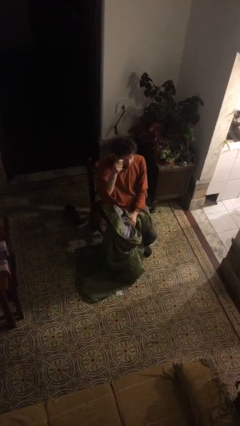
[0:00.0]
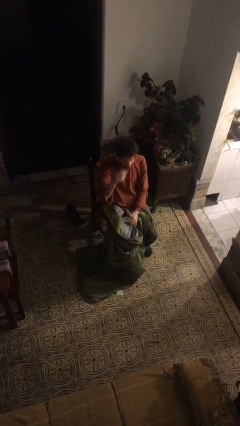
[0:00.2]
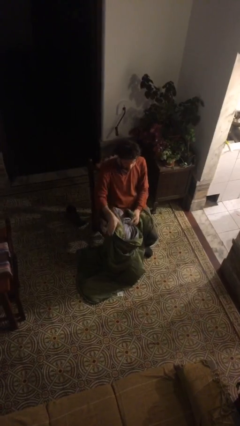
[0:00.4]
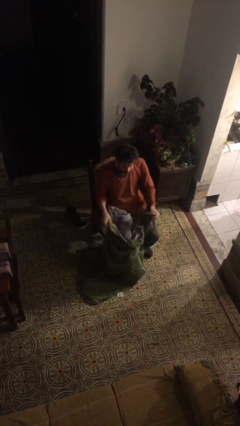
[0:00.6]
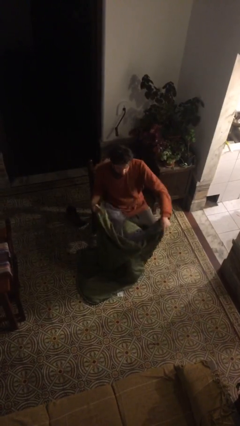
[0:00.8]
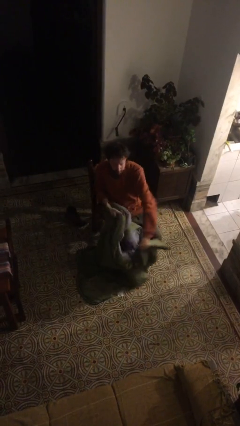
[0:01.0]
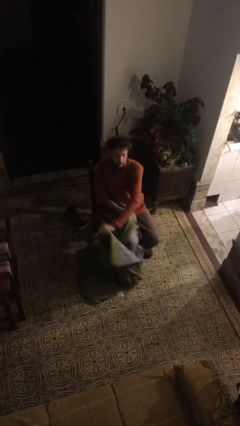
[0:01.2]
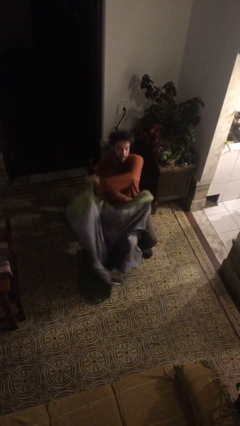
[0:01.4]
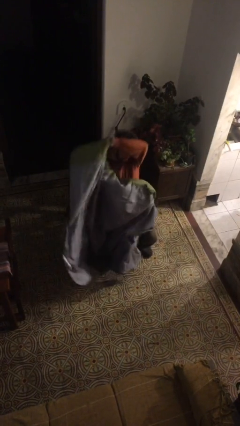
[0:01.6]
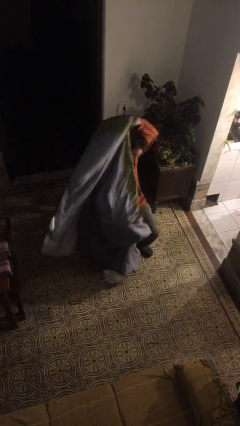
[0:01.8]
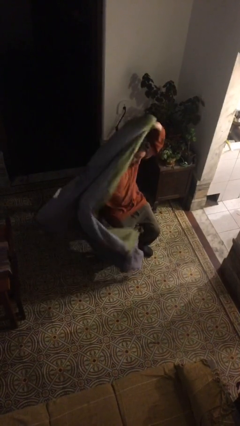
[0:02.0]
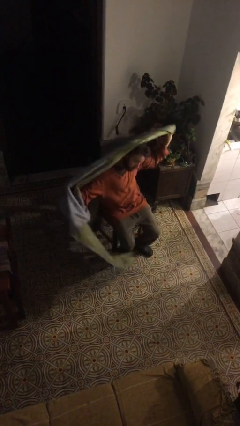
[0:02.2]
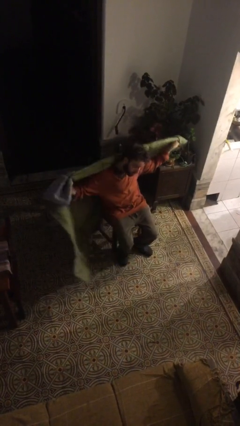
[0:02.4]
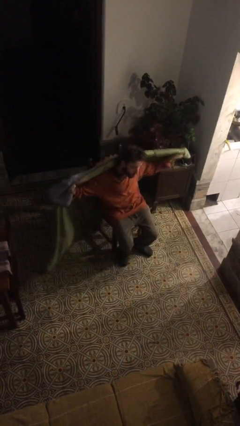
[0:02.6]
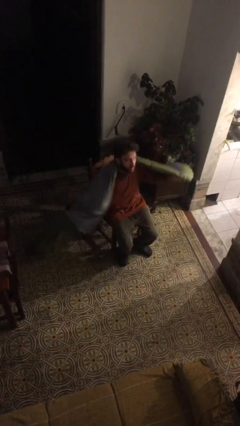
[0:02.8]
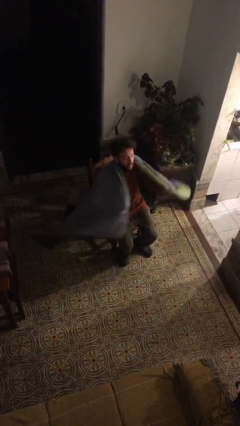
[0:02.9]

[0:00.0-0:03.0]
person covers with blanket

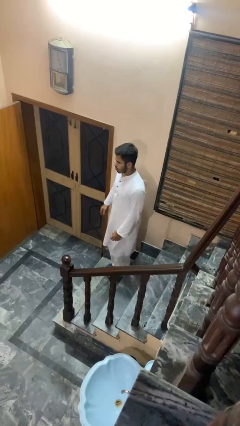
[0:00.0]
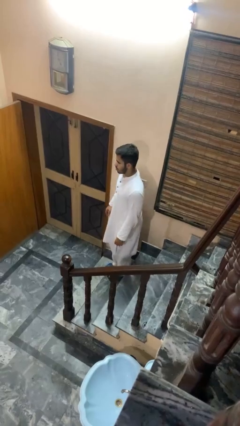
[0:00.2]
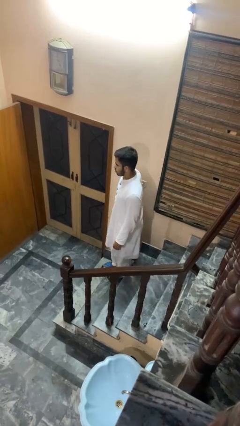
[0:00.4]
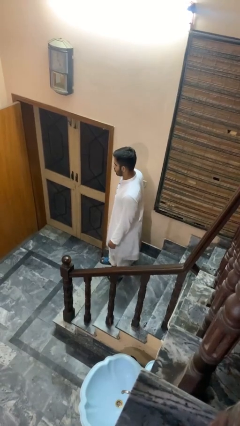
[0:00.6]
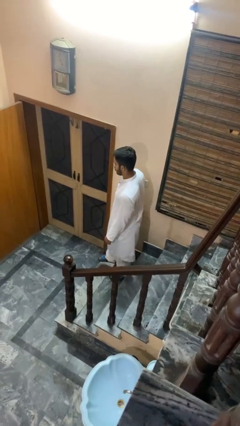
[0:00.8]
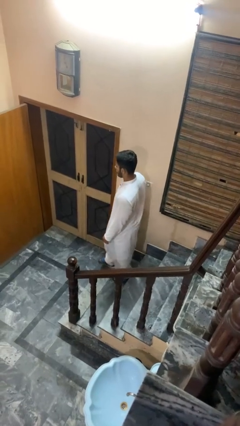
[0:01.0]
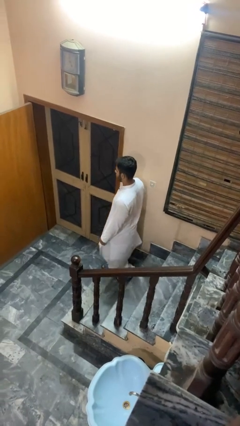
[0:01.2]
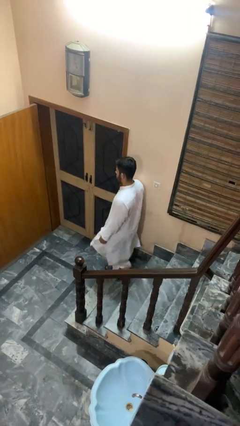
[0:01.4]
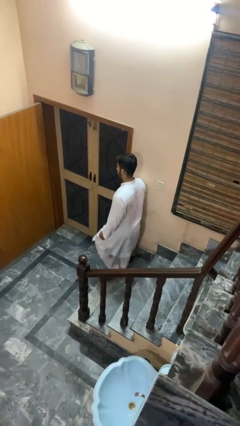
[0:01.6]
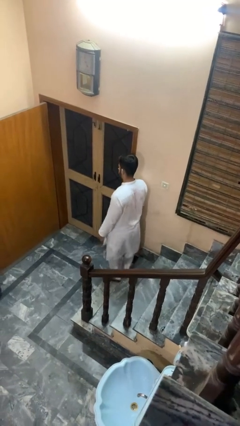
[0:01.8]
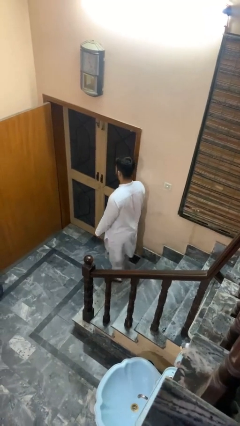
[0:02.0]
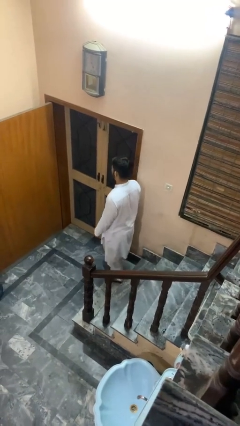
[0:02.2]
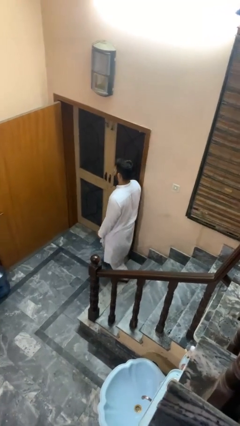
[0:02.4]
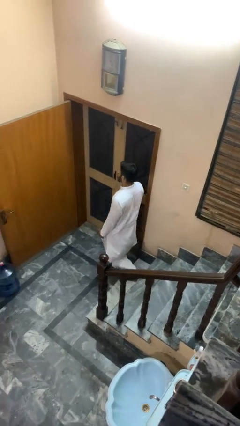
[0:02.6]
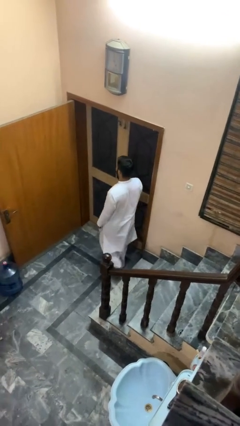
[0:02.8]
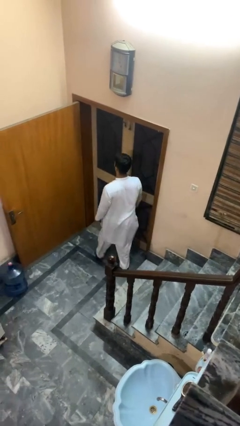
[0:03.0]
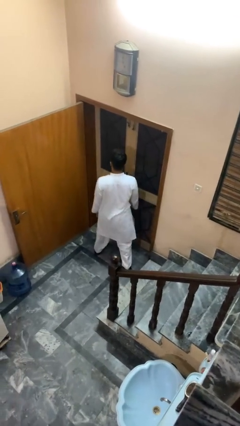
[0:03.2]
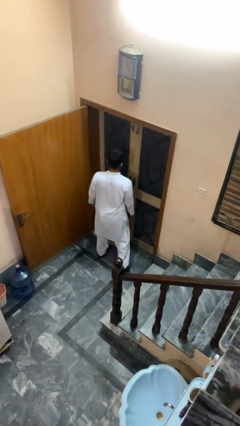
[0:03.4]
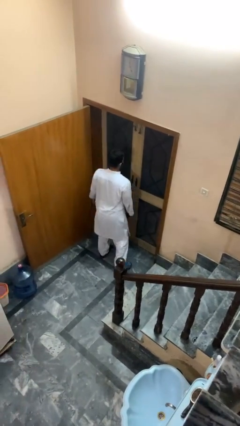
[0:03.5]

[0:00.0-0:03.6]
person climbs down stairs

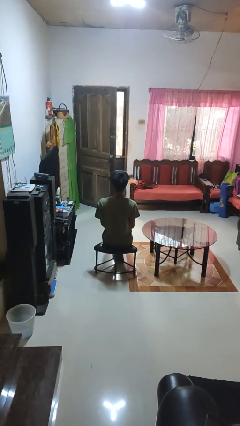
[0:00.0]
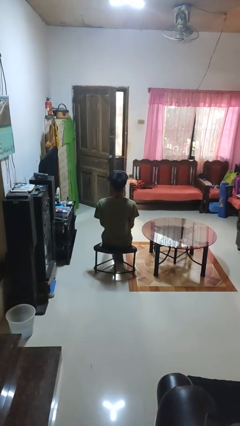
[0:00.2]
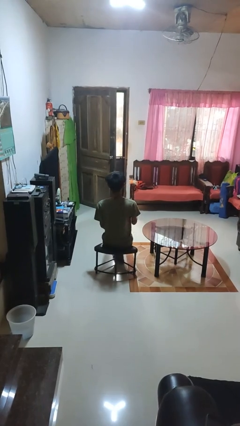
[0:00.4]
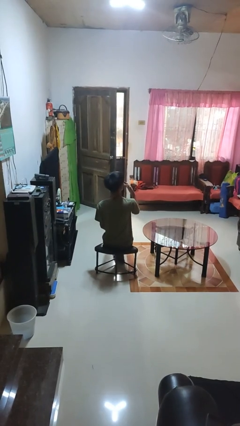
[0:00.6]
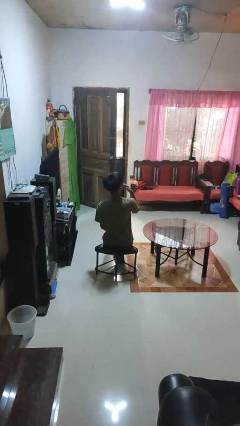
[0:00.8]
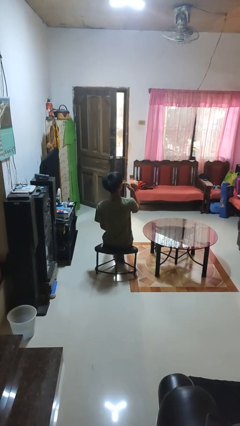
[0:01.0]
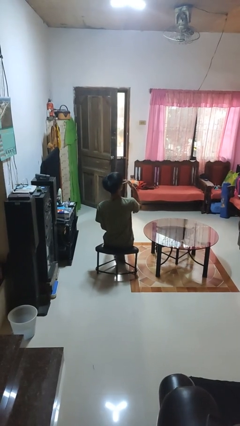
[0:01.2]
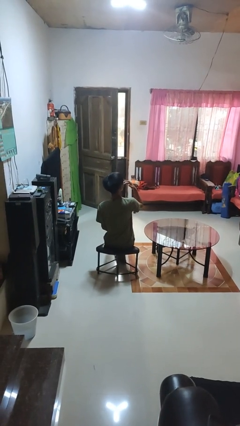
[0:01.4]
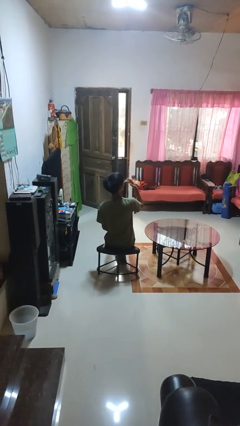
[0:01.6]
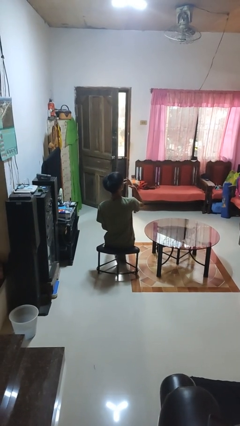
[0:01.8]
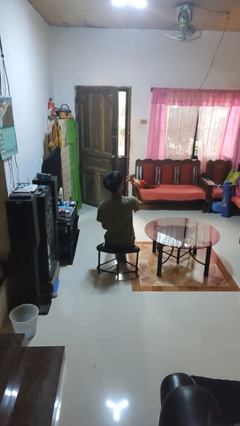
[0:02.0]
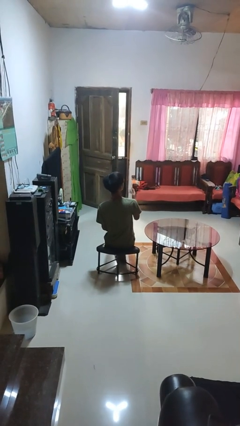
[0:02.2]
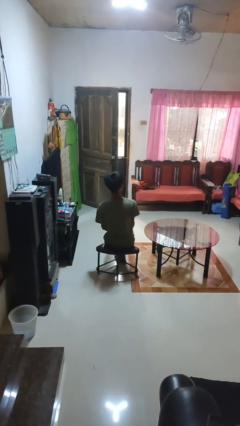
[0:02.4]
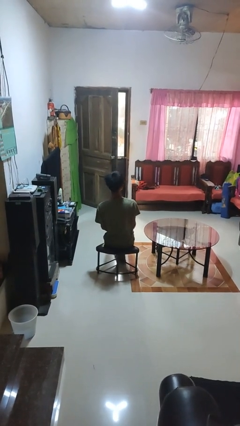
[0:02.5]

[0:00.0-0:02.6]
person licks fingers

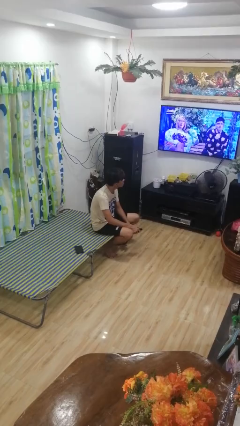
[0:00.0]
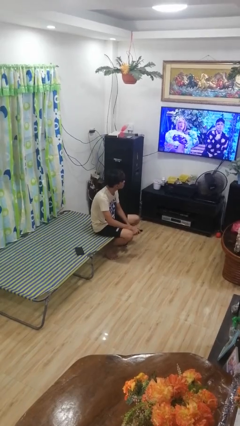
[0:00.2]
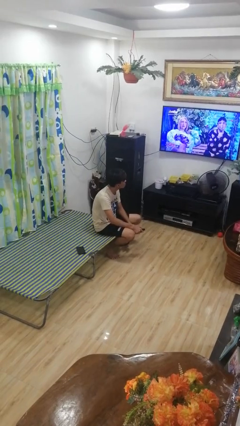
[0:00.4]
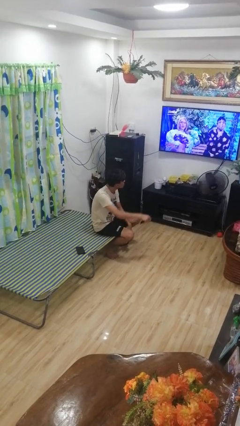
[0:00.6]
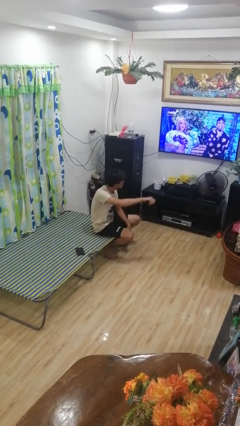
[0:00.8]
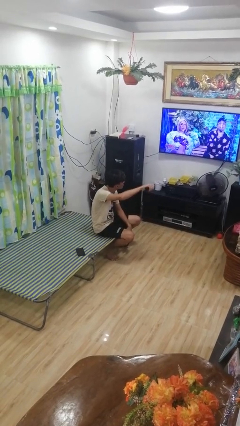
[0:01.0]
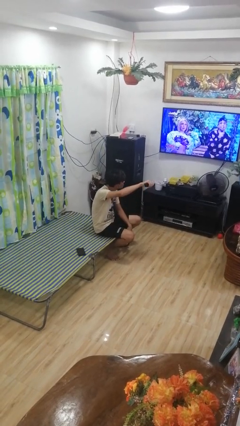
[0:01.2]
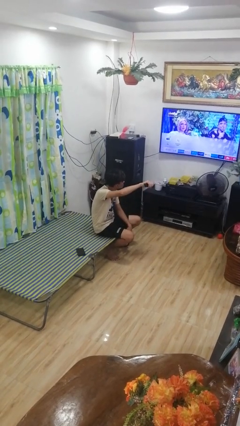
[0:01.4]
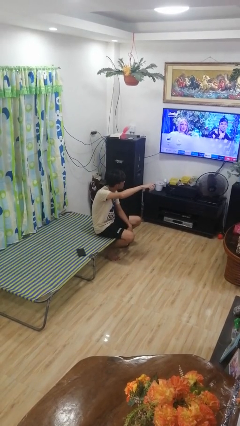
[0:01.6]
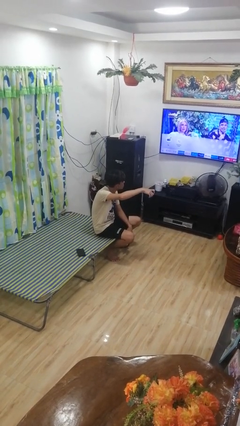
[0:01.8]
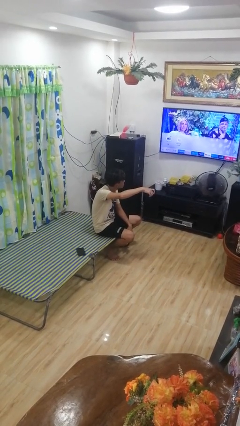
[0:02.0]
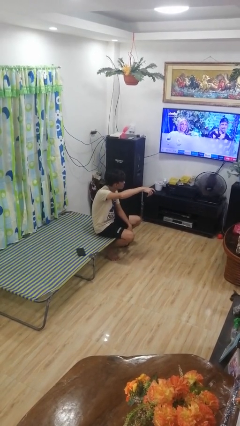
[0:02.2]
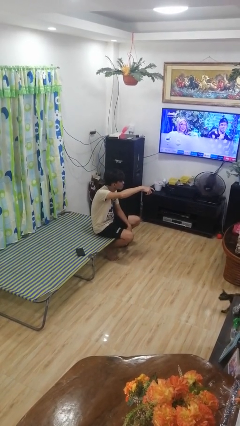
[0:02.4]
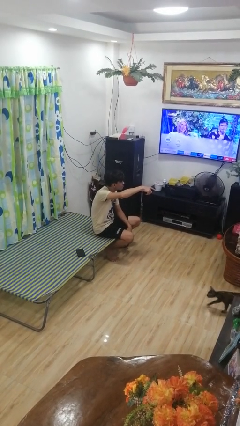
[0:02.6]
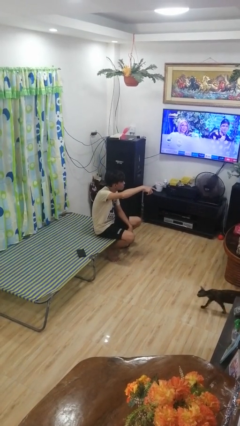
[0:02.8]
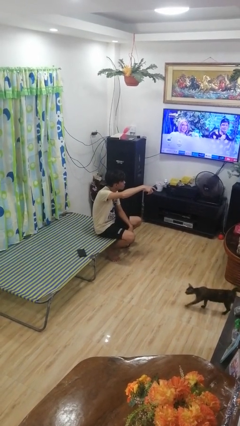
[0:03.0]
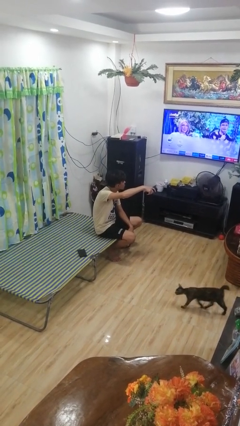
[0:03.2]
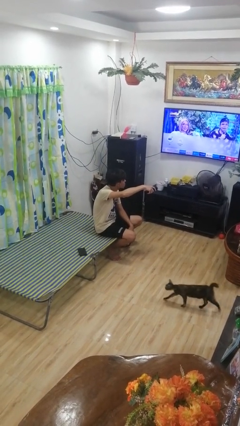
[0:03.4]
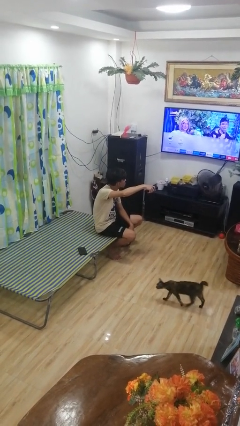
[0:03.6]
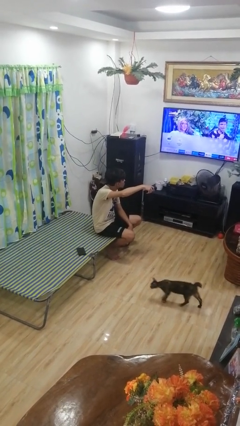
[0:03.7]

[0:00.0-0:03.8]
person uses television remote

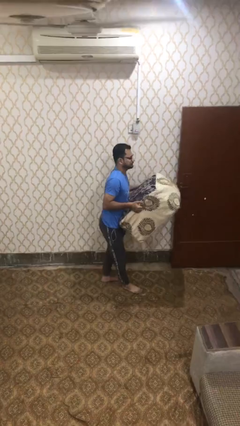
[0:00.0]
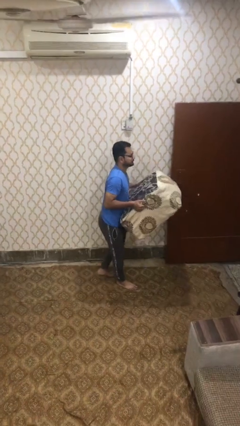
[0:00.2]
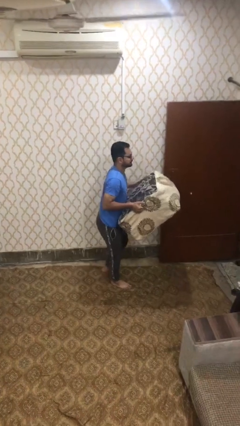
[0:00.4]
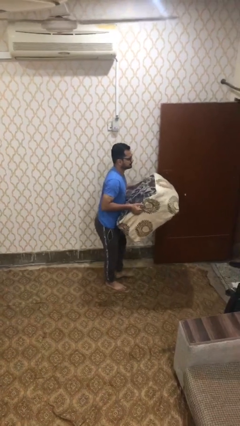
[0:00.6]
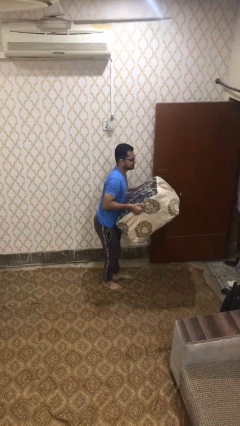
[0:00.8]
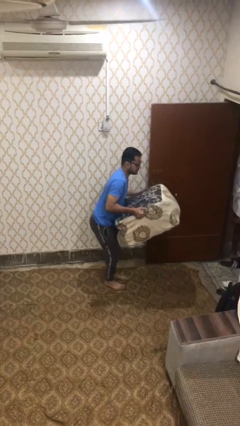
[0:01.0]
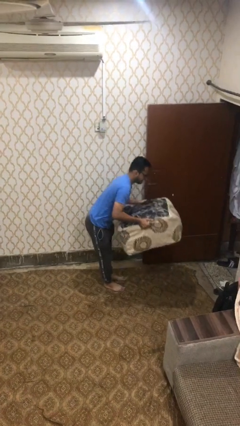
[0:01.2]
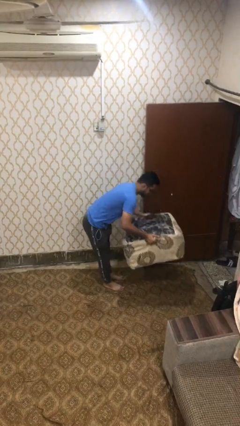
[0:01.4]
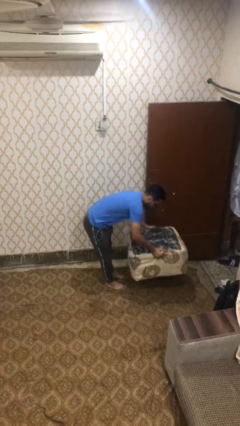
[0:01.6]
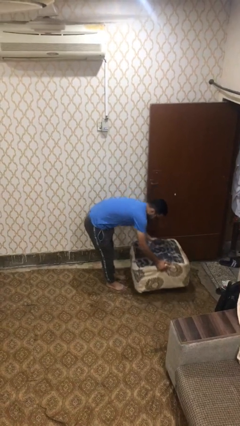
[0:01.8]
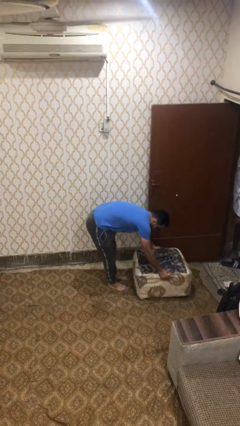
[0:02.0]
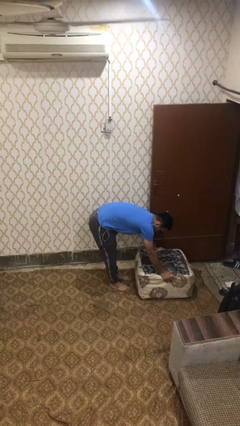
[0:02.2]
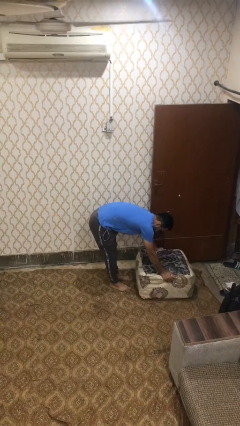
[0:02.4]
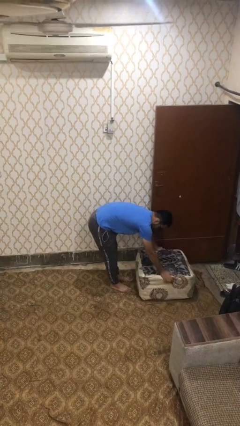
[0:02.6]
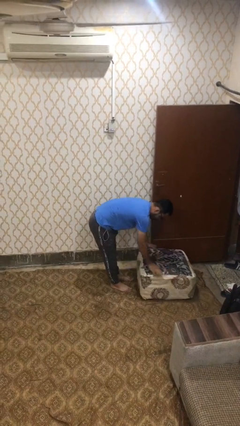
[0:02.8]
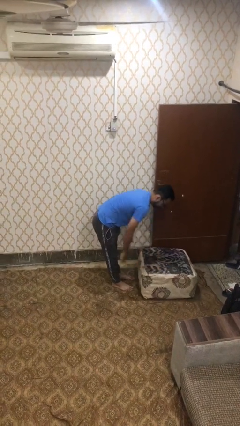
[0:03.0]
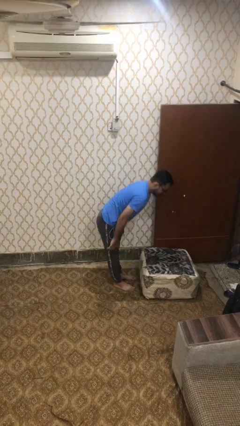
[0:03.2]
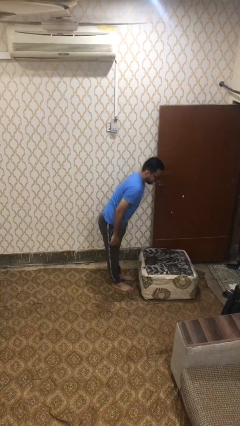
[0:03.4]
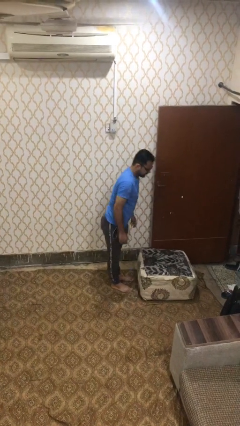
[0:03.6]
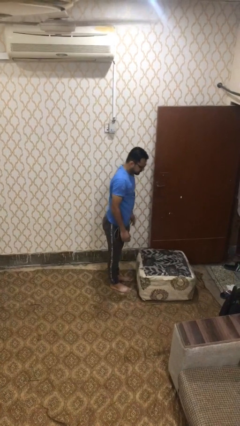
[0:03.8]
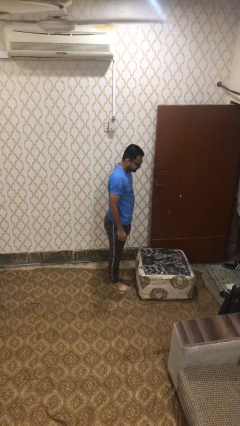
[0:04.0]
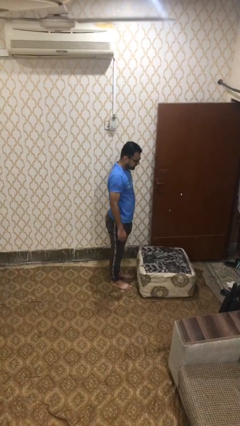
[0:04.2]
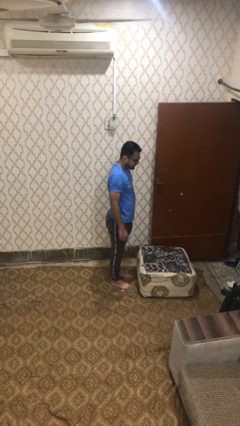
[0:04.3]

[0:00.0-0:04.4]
person puts down object on floor
